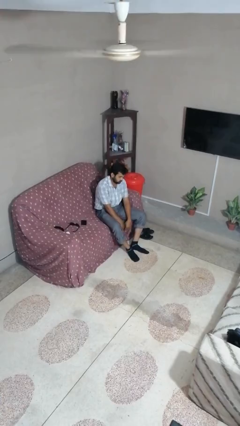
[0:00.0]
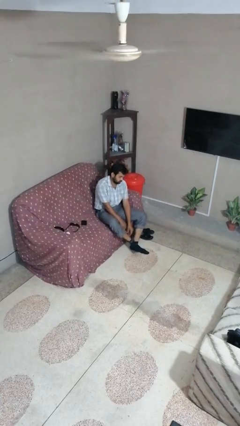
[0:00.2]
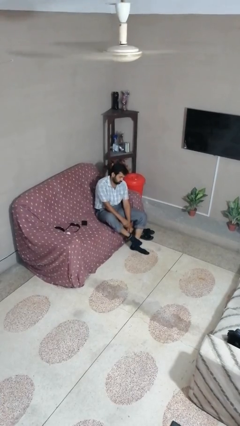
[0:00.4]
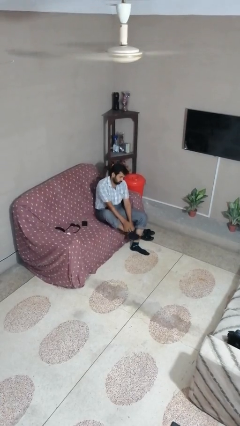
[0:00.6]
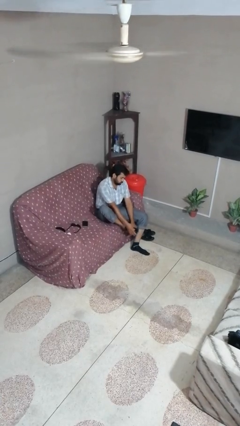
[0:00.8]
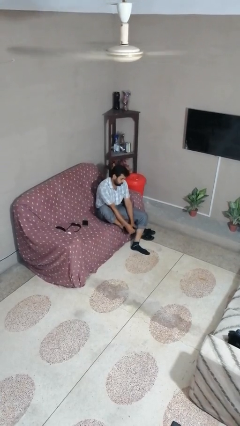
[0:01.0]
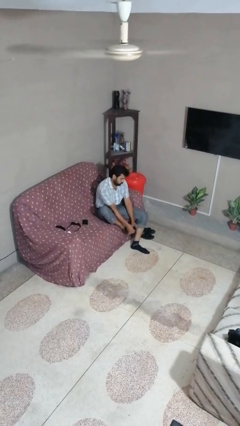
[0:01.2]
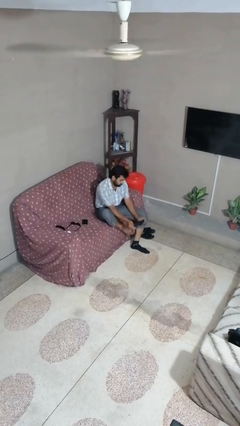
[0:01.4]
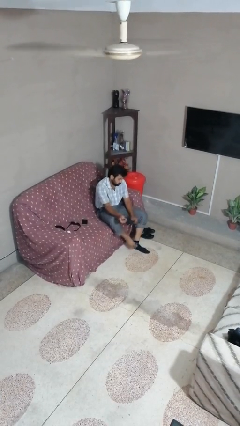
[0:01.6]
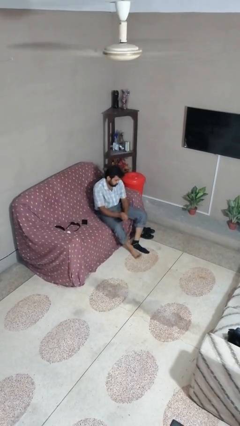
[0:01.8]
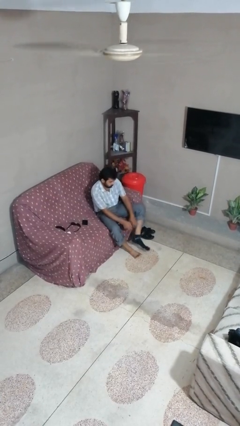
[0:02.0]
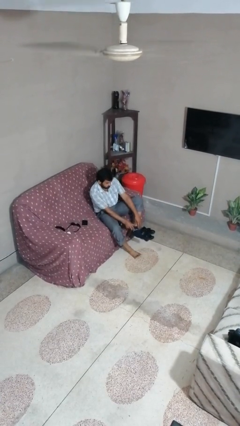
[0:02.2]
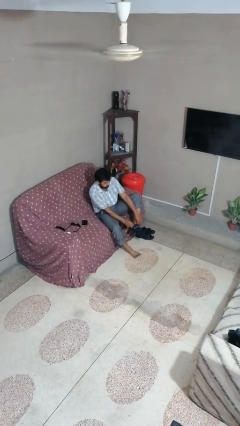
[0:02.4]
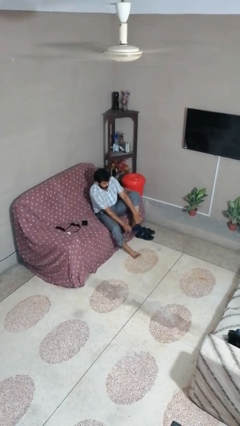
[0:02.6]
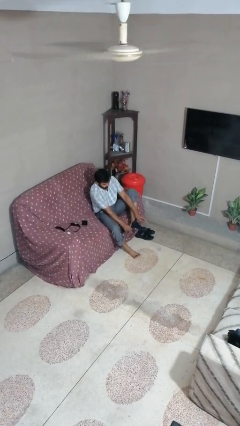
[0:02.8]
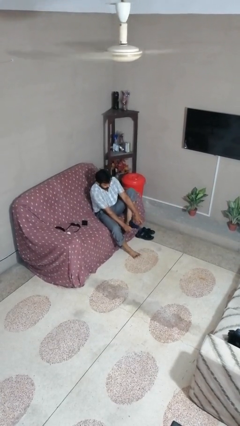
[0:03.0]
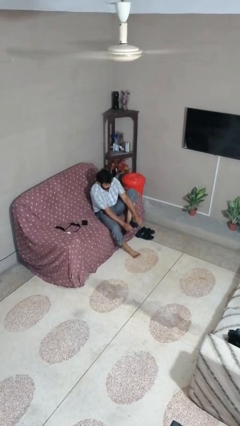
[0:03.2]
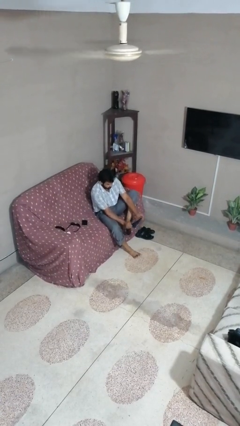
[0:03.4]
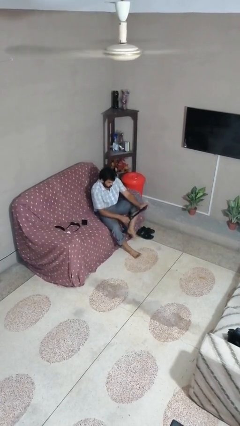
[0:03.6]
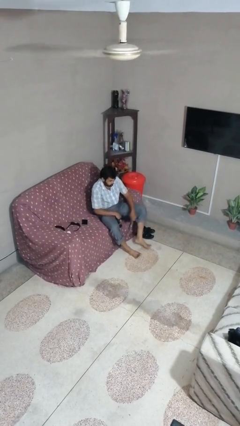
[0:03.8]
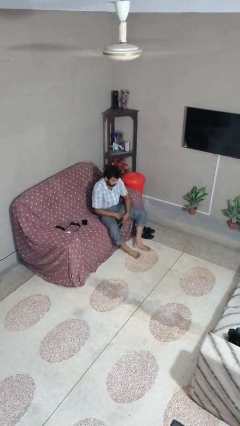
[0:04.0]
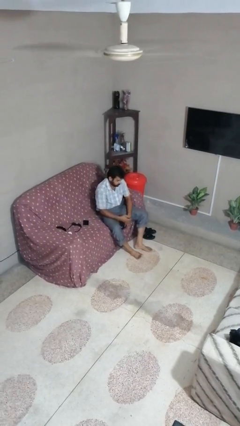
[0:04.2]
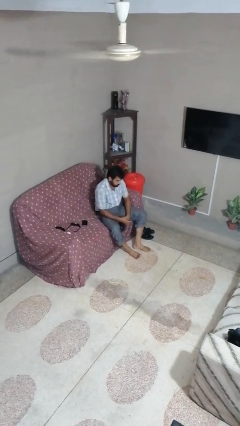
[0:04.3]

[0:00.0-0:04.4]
person takes off socks

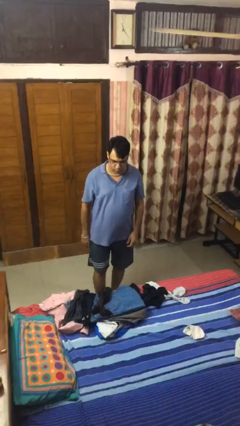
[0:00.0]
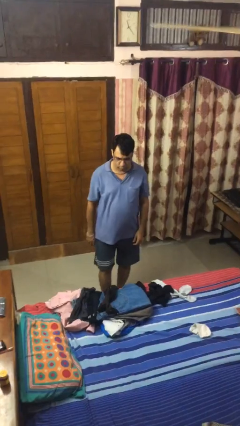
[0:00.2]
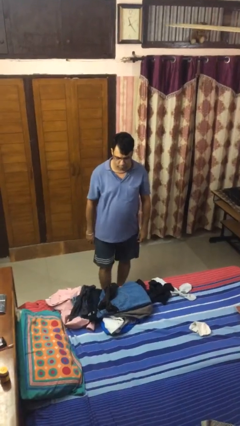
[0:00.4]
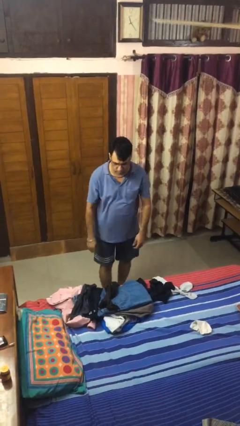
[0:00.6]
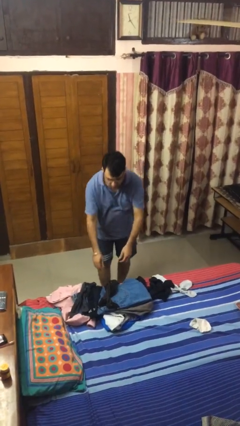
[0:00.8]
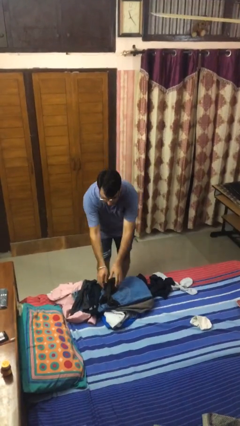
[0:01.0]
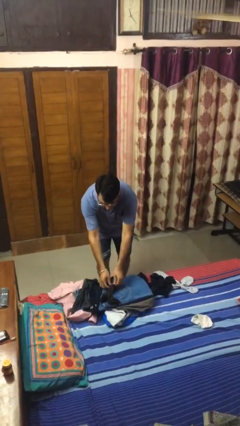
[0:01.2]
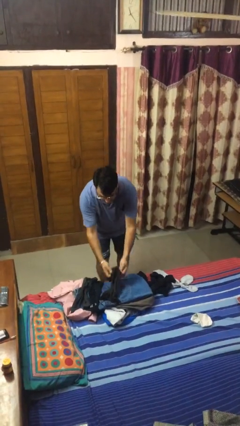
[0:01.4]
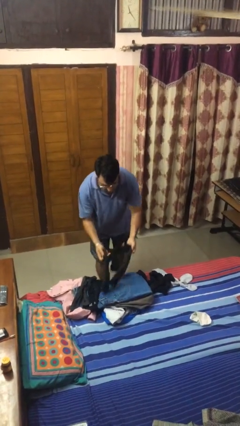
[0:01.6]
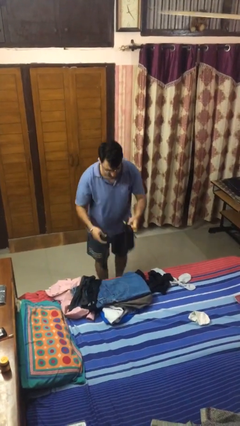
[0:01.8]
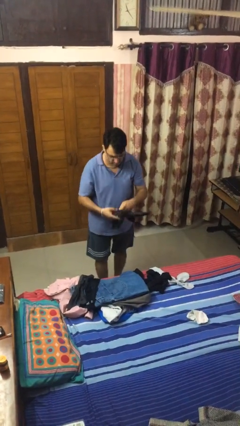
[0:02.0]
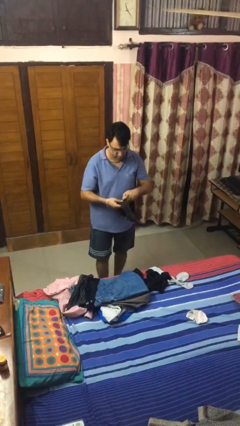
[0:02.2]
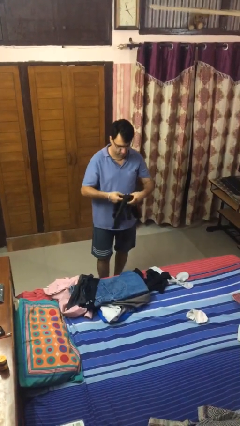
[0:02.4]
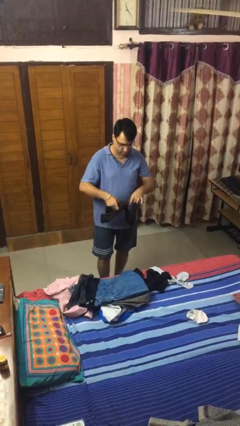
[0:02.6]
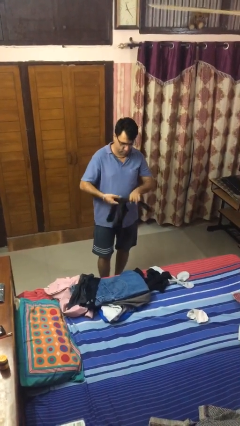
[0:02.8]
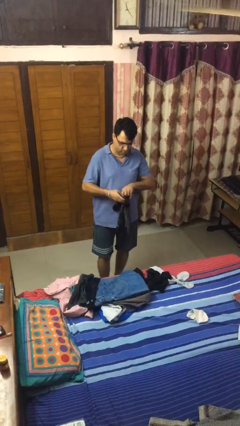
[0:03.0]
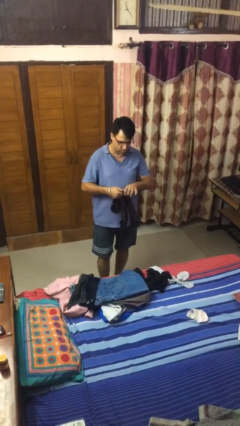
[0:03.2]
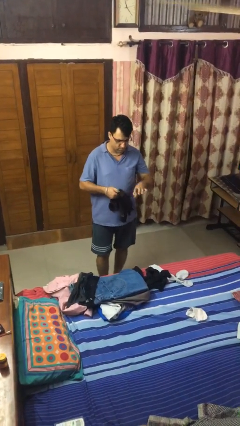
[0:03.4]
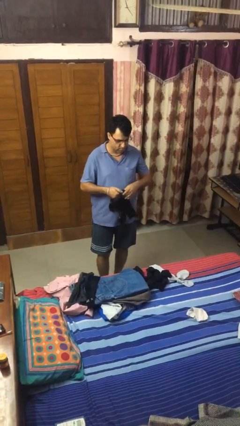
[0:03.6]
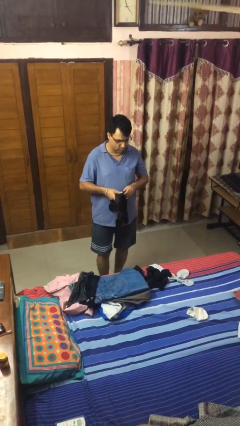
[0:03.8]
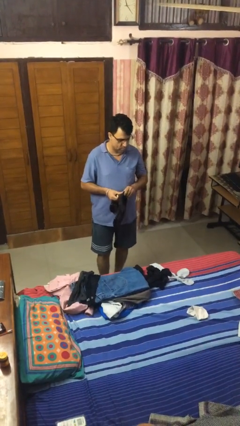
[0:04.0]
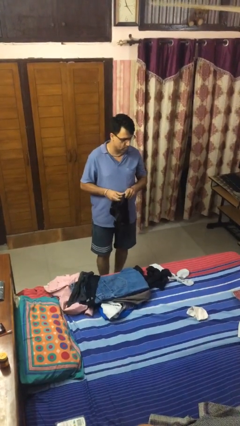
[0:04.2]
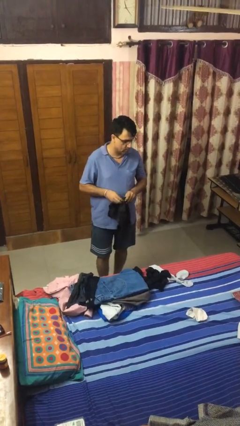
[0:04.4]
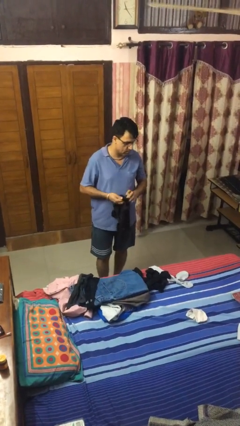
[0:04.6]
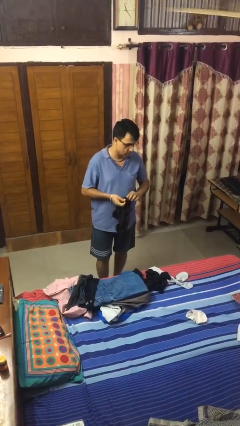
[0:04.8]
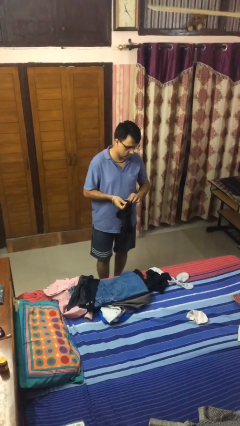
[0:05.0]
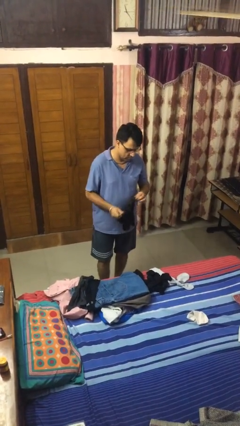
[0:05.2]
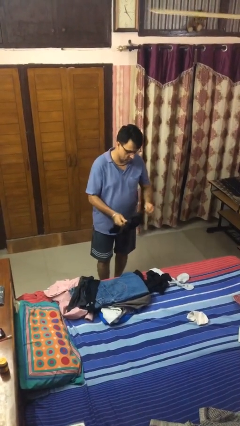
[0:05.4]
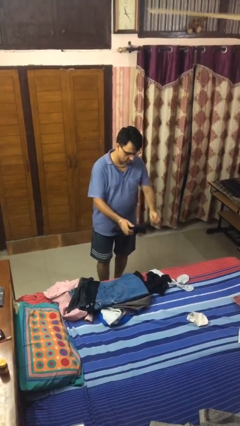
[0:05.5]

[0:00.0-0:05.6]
person folds socks

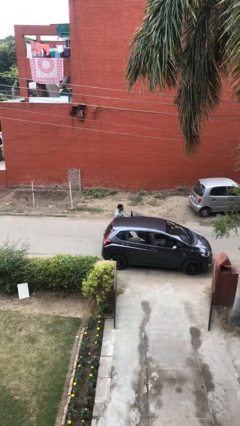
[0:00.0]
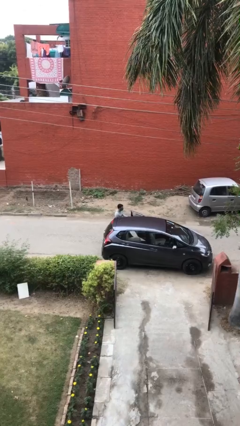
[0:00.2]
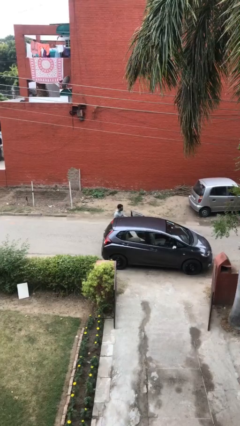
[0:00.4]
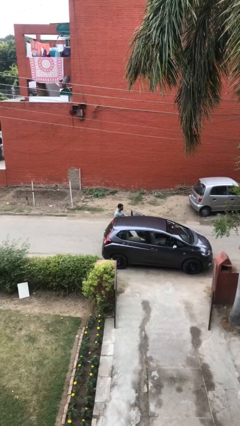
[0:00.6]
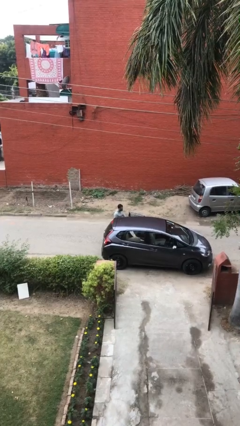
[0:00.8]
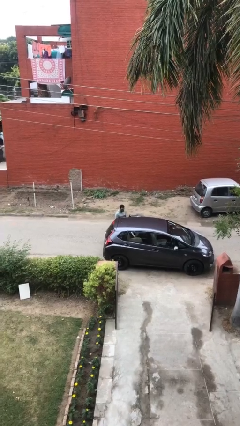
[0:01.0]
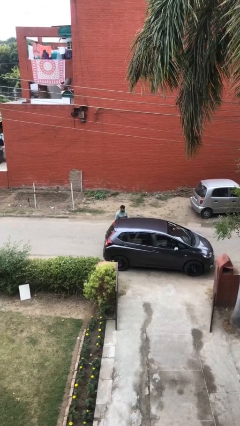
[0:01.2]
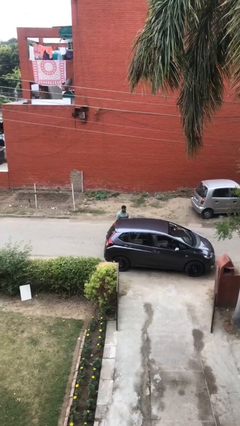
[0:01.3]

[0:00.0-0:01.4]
person closes car door

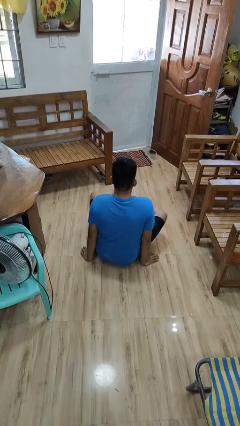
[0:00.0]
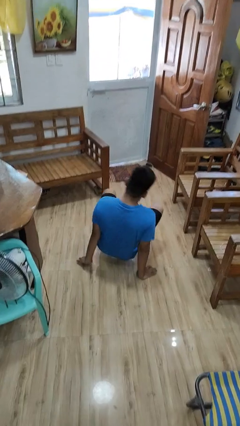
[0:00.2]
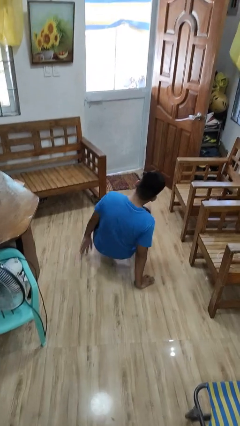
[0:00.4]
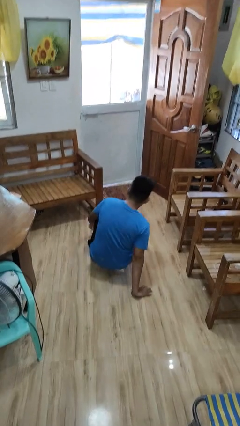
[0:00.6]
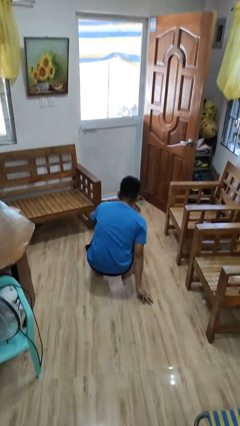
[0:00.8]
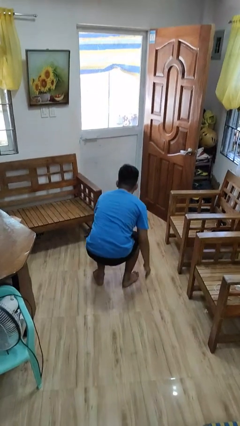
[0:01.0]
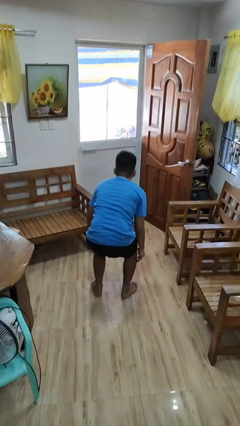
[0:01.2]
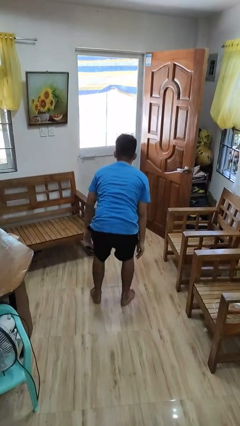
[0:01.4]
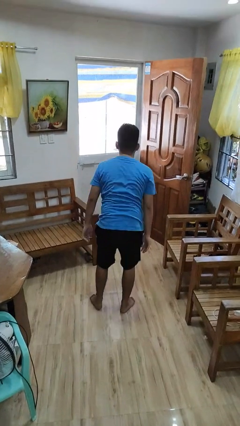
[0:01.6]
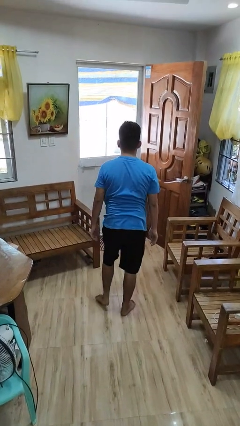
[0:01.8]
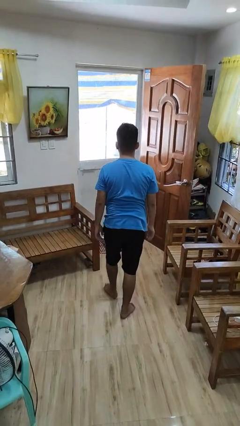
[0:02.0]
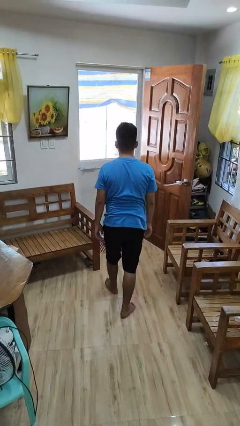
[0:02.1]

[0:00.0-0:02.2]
person stands up from floor

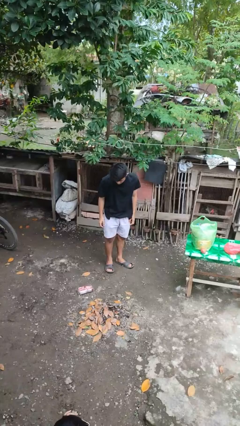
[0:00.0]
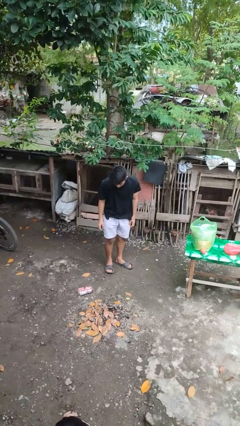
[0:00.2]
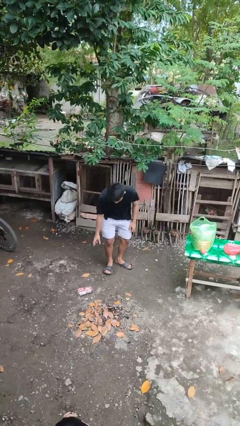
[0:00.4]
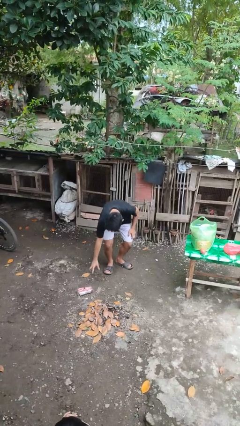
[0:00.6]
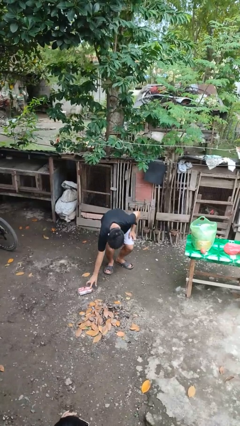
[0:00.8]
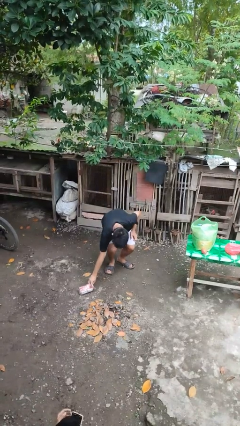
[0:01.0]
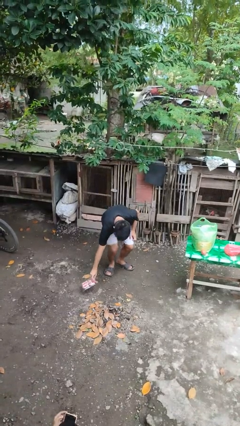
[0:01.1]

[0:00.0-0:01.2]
person picks up object from floor

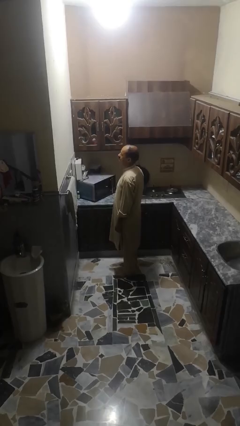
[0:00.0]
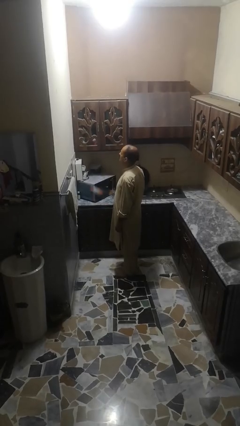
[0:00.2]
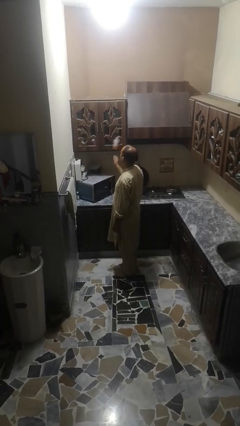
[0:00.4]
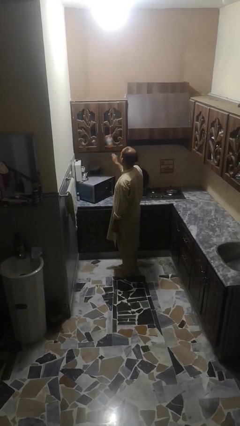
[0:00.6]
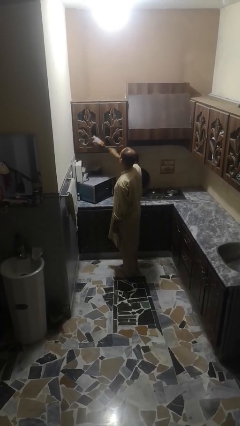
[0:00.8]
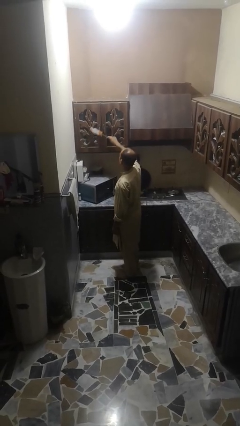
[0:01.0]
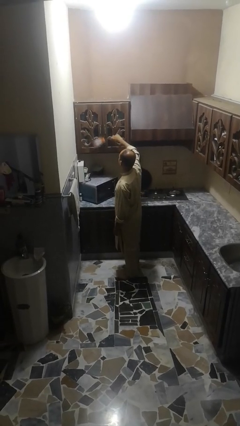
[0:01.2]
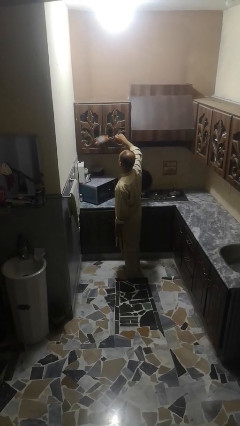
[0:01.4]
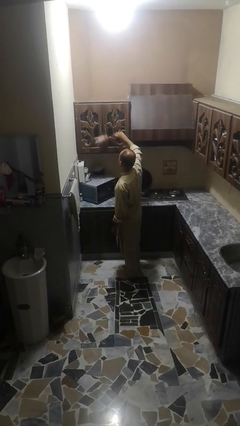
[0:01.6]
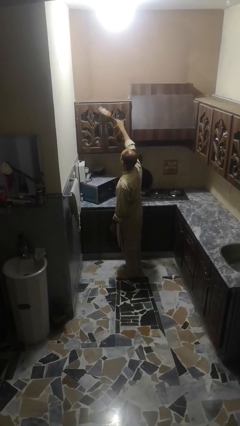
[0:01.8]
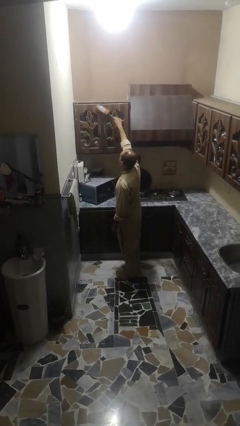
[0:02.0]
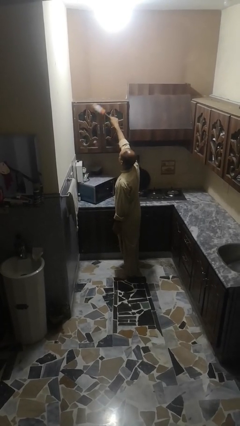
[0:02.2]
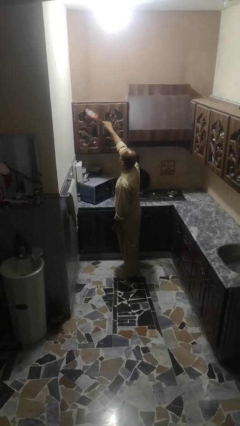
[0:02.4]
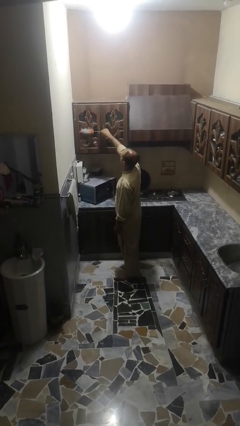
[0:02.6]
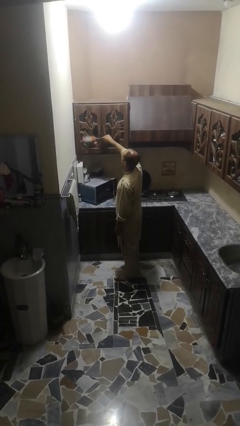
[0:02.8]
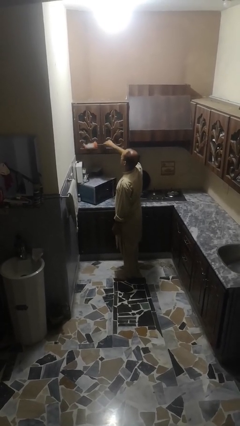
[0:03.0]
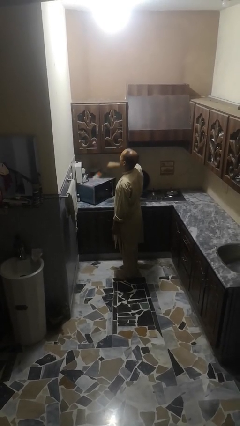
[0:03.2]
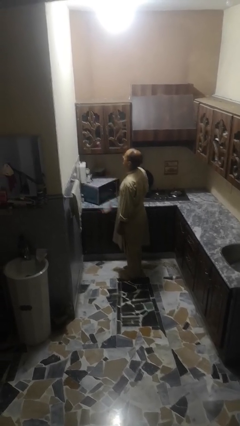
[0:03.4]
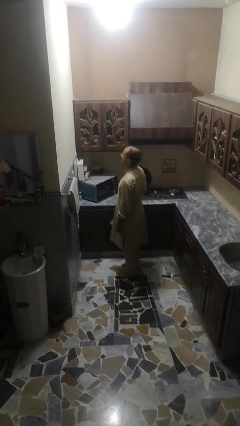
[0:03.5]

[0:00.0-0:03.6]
person dusts furniture
